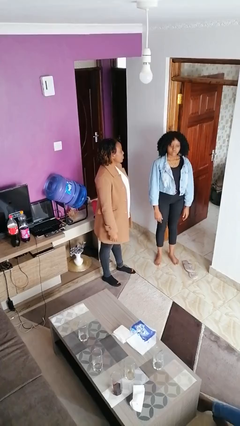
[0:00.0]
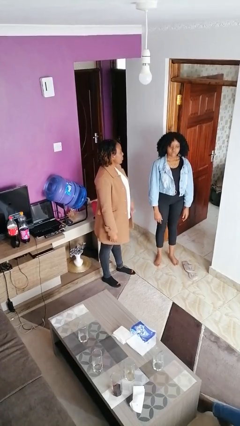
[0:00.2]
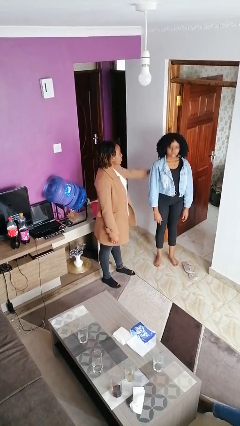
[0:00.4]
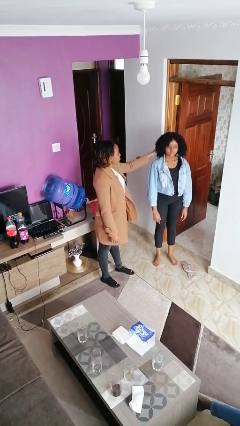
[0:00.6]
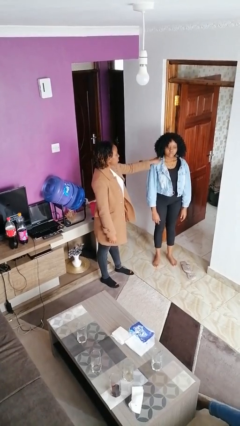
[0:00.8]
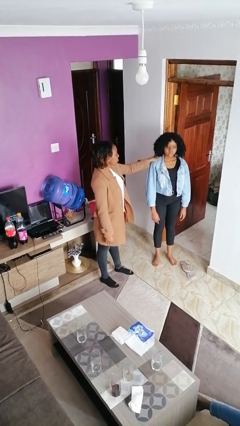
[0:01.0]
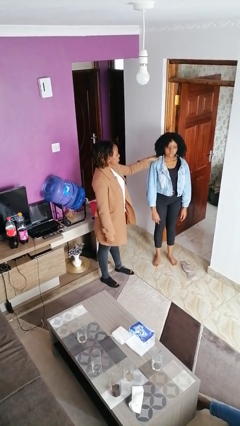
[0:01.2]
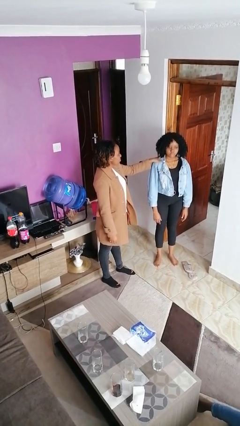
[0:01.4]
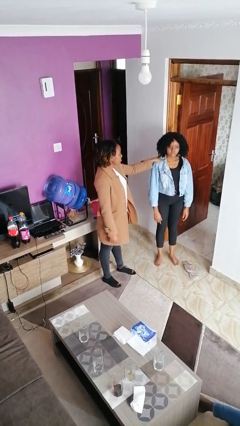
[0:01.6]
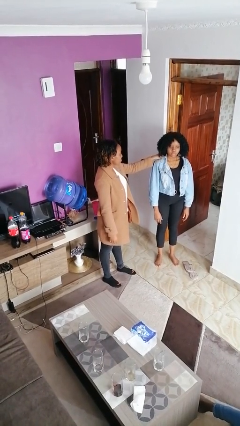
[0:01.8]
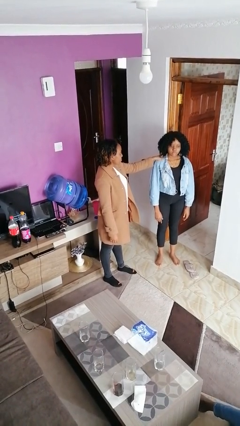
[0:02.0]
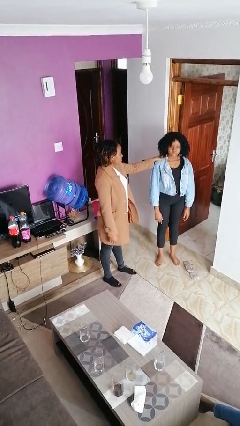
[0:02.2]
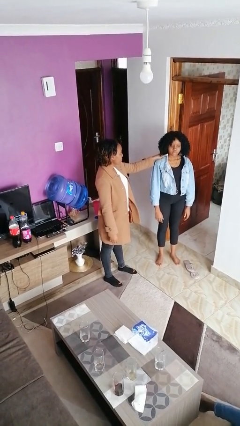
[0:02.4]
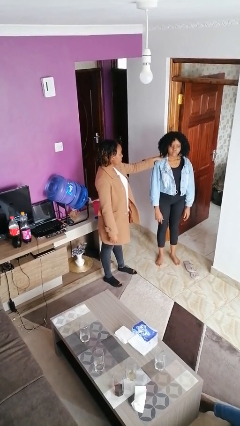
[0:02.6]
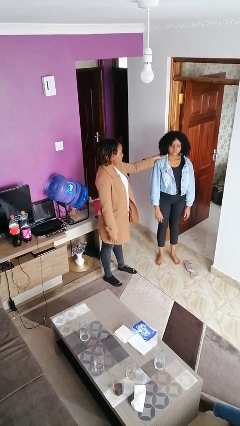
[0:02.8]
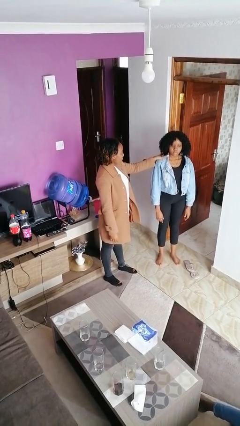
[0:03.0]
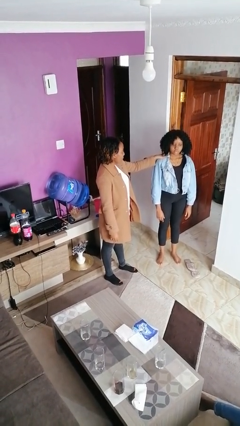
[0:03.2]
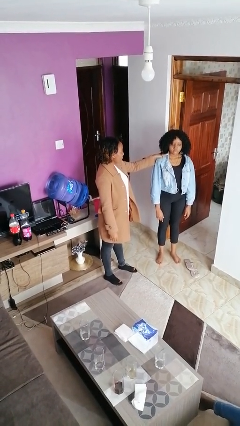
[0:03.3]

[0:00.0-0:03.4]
person pounds shoulders of person

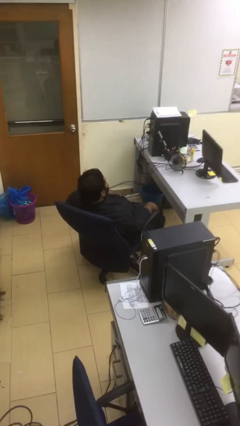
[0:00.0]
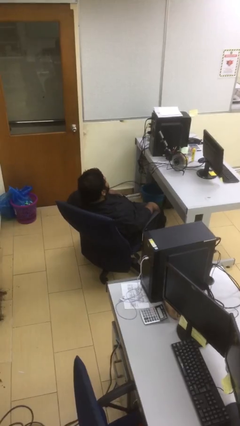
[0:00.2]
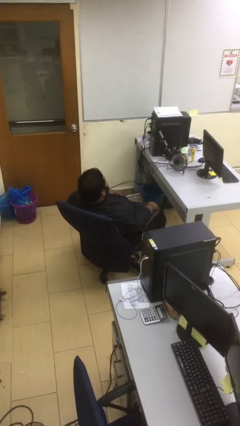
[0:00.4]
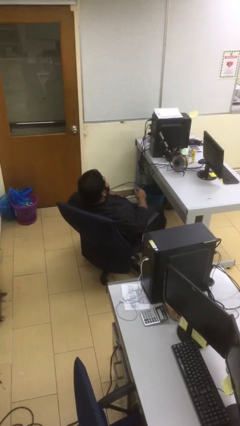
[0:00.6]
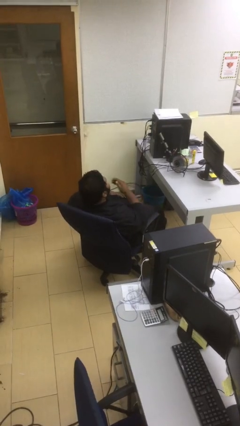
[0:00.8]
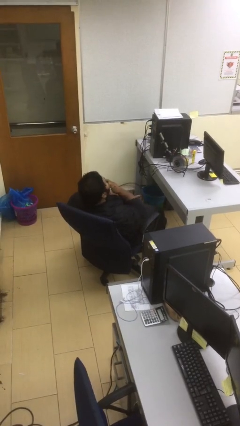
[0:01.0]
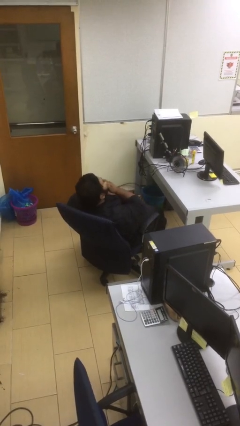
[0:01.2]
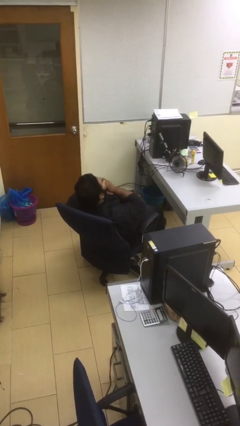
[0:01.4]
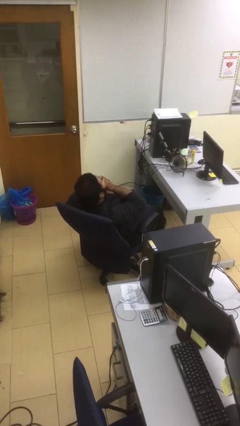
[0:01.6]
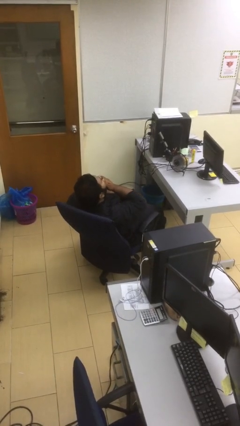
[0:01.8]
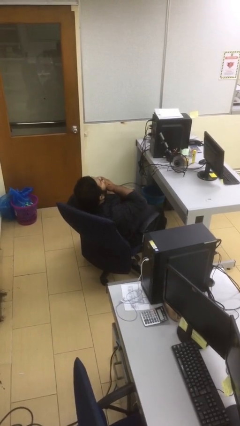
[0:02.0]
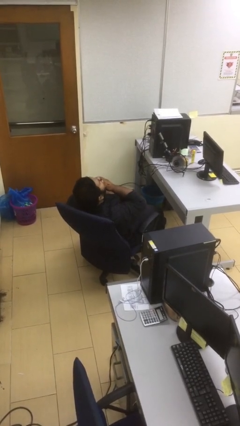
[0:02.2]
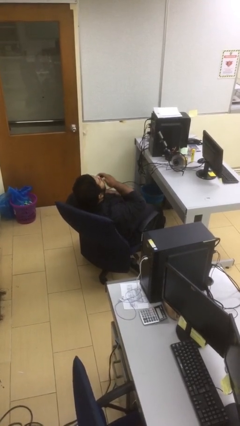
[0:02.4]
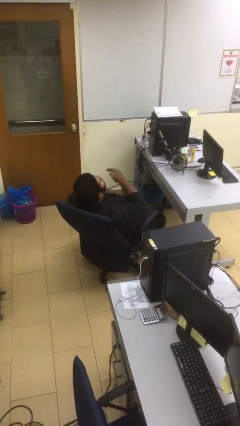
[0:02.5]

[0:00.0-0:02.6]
person yawns

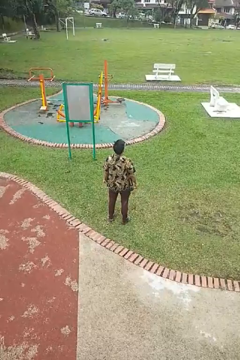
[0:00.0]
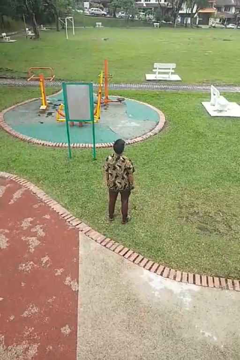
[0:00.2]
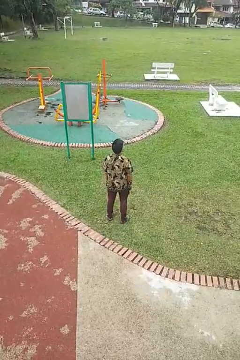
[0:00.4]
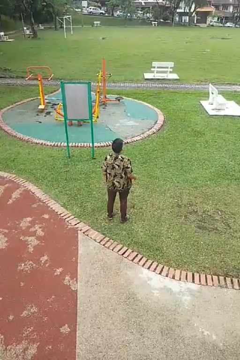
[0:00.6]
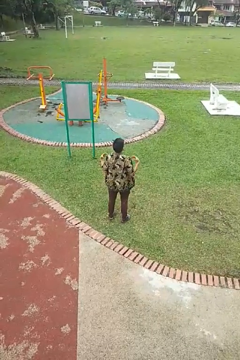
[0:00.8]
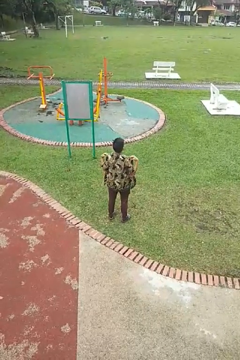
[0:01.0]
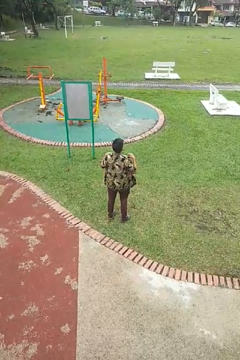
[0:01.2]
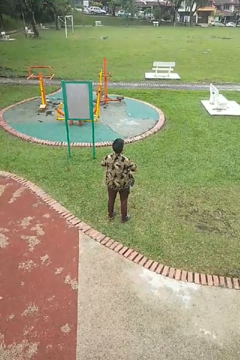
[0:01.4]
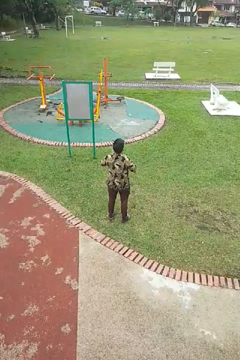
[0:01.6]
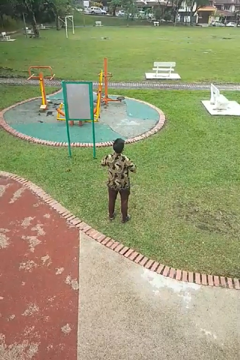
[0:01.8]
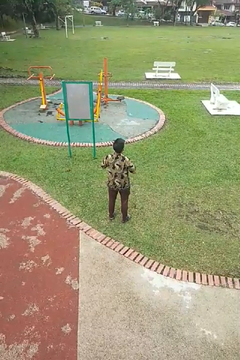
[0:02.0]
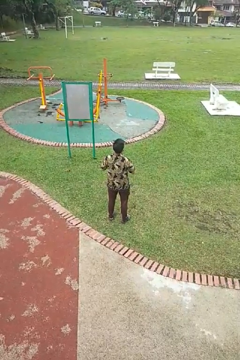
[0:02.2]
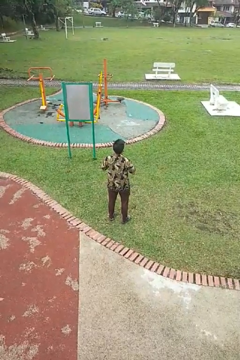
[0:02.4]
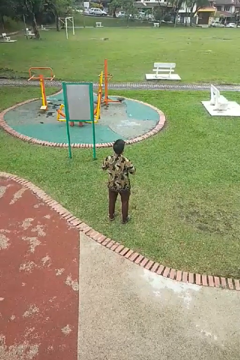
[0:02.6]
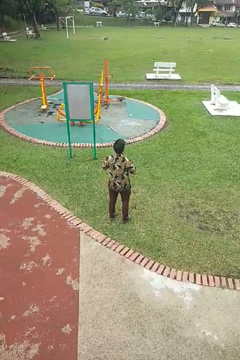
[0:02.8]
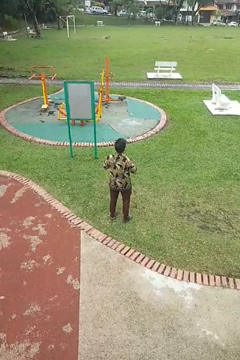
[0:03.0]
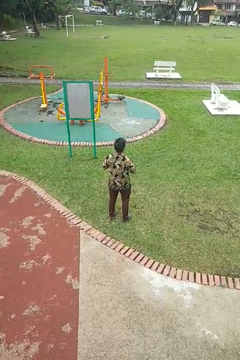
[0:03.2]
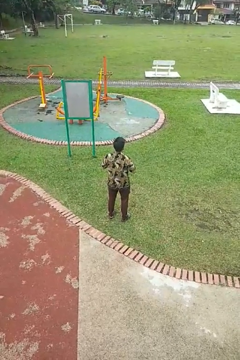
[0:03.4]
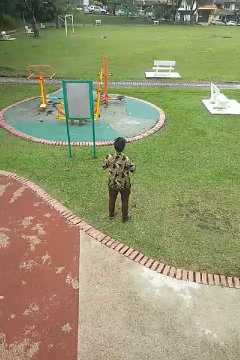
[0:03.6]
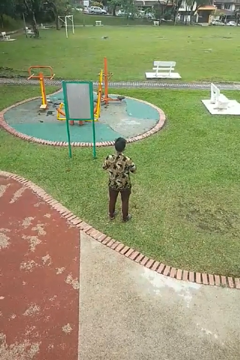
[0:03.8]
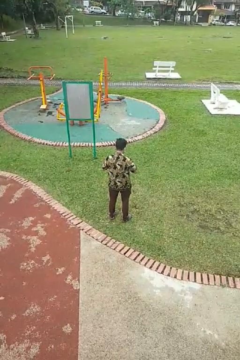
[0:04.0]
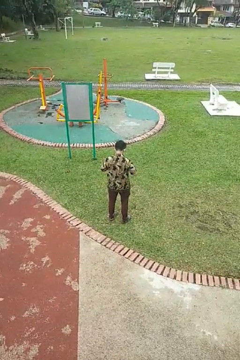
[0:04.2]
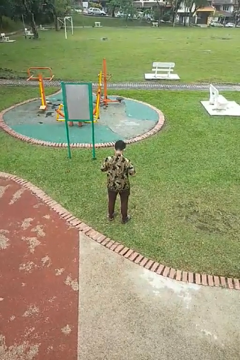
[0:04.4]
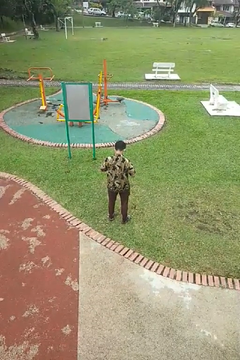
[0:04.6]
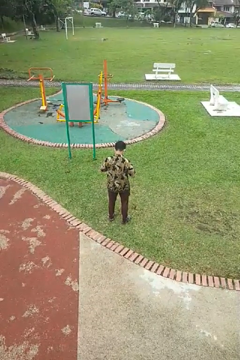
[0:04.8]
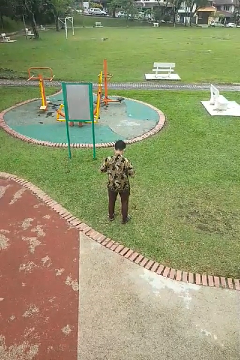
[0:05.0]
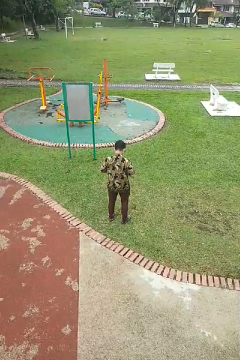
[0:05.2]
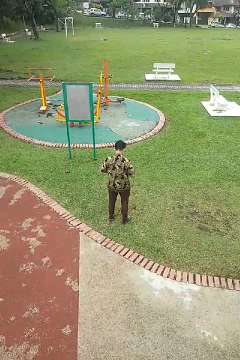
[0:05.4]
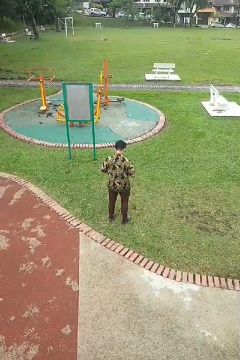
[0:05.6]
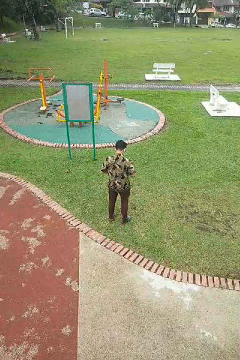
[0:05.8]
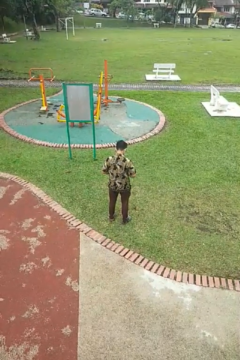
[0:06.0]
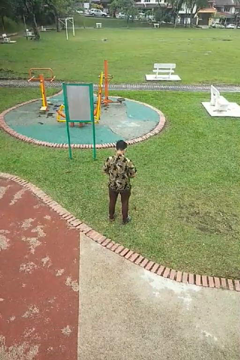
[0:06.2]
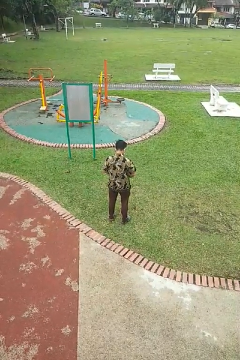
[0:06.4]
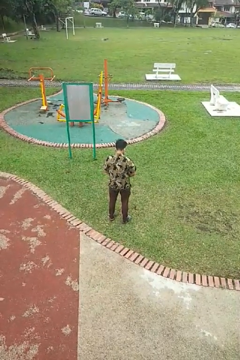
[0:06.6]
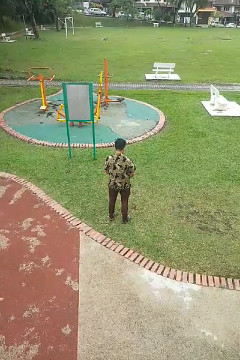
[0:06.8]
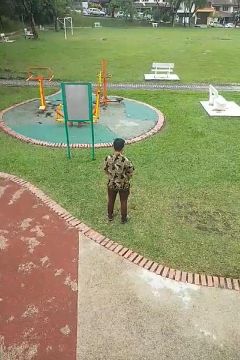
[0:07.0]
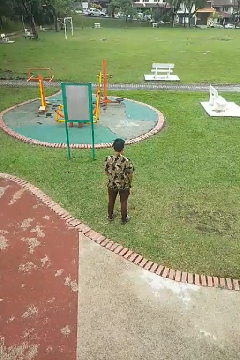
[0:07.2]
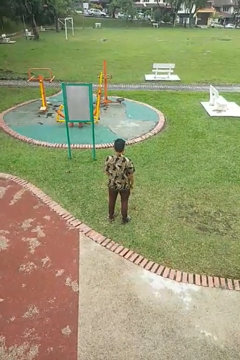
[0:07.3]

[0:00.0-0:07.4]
person buttons shirt

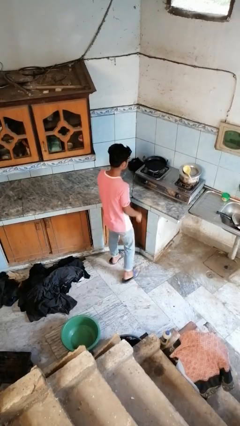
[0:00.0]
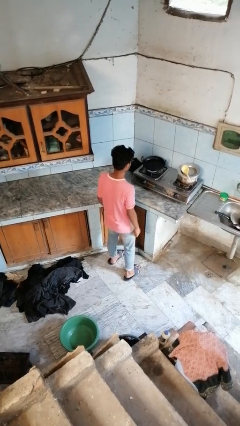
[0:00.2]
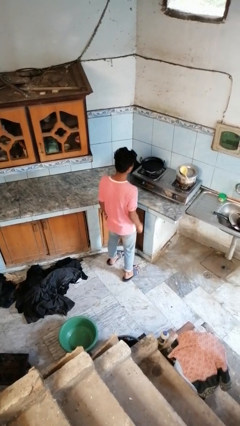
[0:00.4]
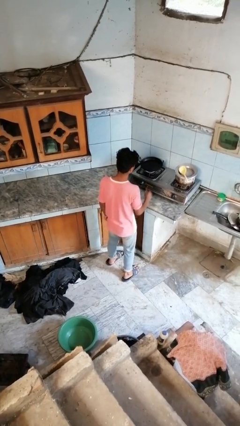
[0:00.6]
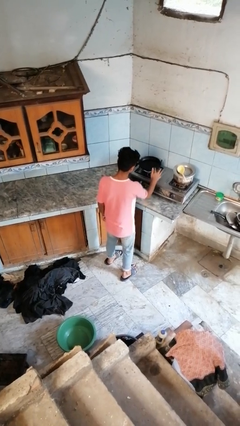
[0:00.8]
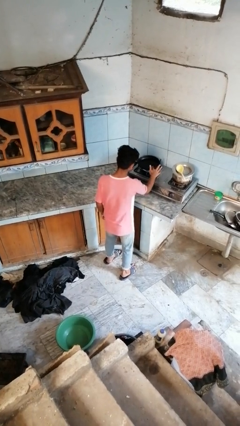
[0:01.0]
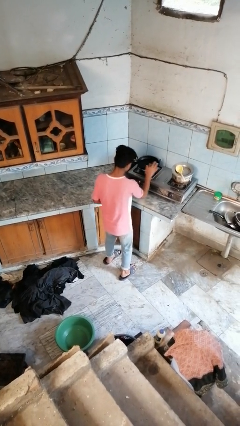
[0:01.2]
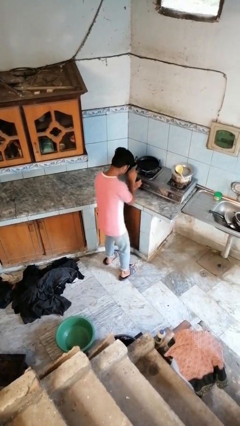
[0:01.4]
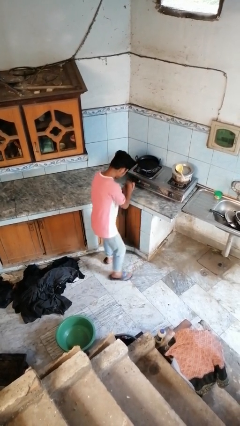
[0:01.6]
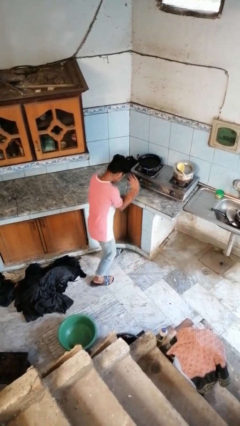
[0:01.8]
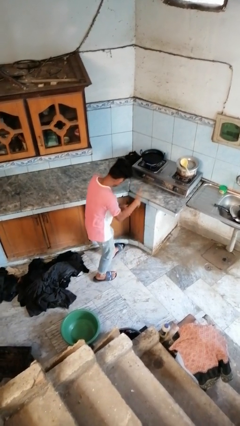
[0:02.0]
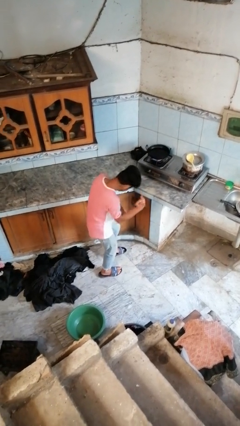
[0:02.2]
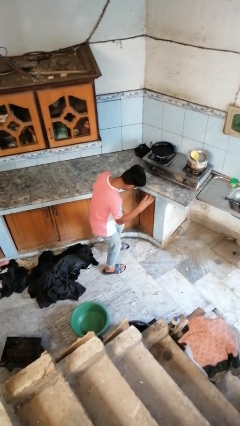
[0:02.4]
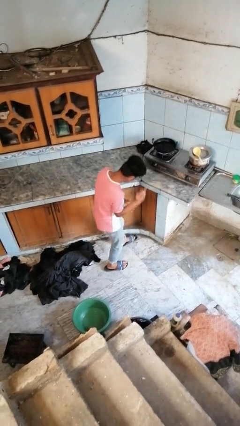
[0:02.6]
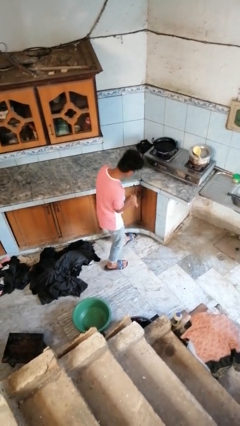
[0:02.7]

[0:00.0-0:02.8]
person burns hand

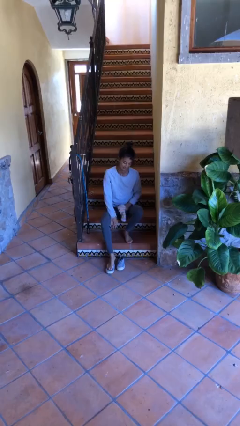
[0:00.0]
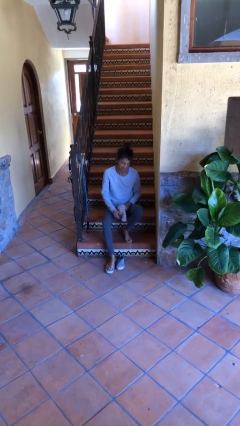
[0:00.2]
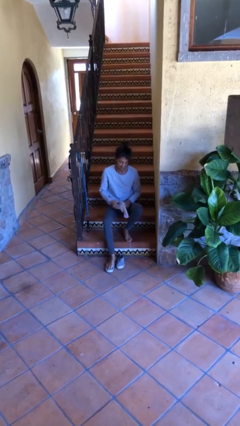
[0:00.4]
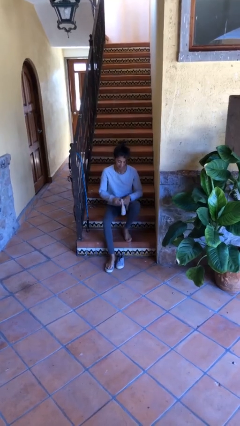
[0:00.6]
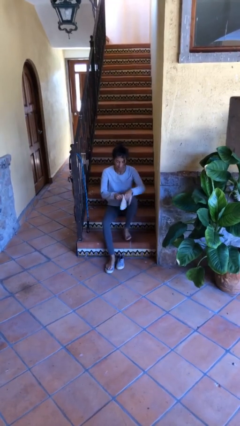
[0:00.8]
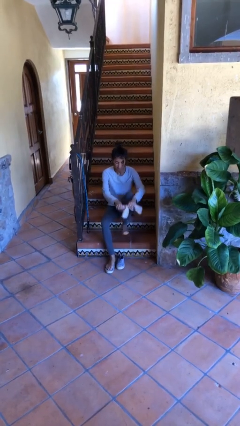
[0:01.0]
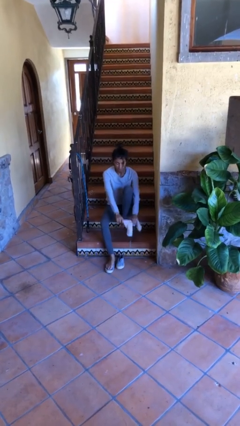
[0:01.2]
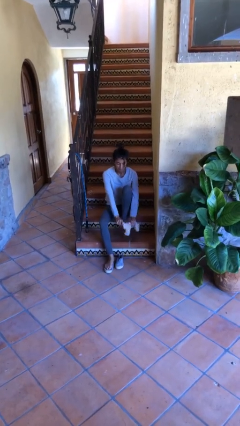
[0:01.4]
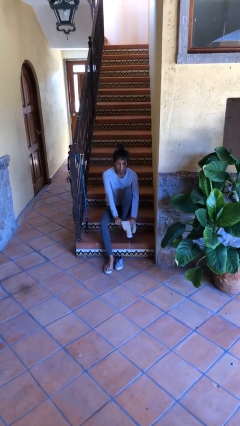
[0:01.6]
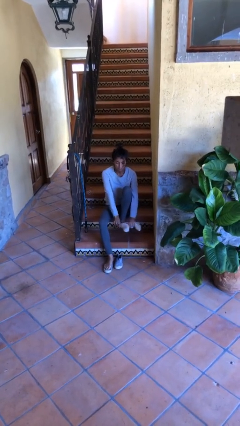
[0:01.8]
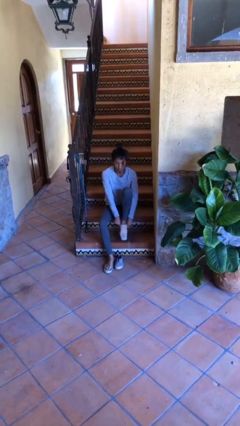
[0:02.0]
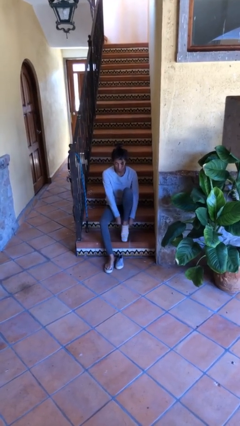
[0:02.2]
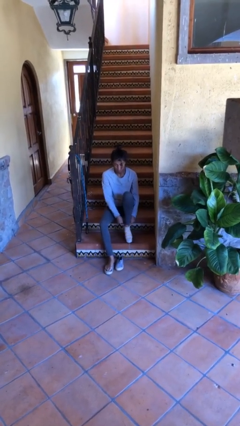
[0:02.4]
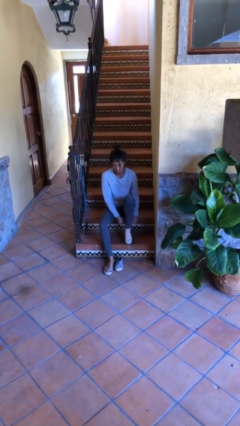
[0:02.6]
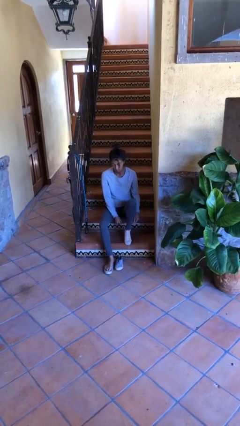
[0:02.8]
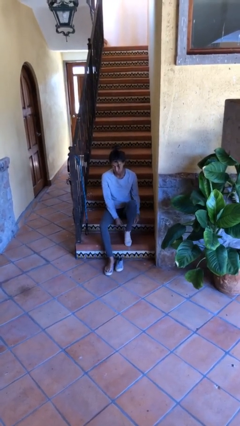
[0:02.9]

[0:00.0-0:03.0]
person puts on socks
